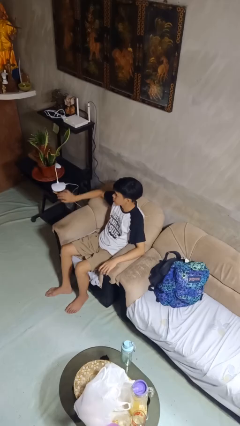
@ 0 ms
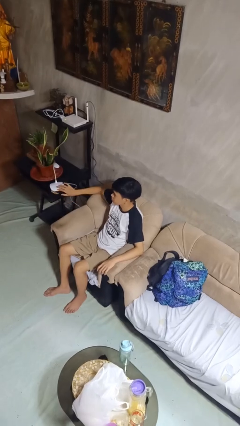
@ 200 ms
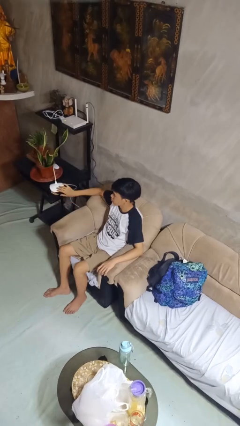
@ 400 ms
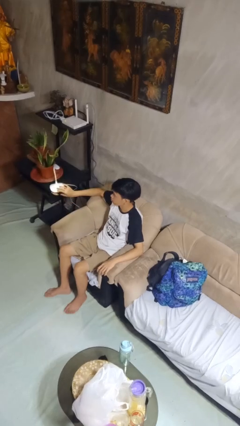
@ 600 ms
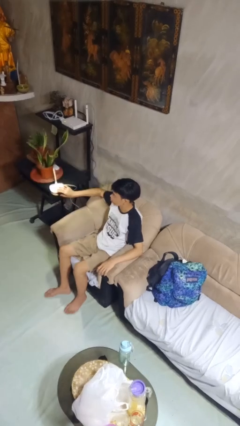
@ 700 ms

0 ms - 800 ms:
person turns on lamp

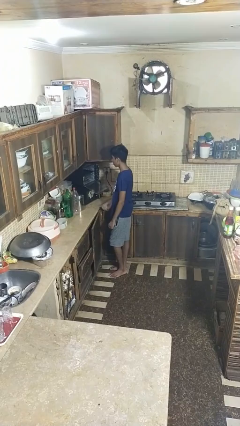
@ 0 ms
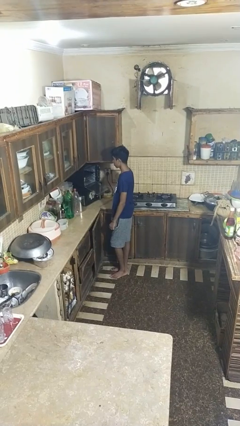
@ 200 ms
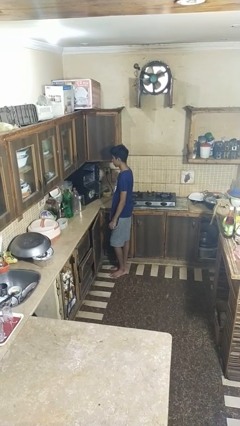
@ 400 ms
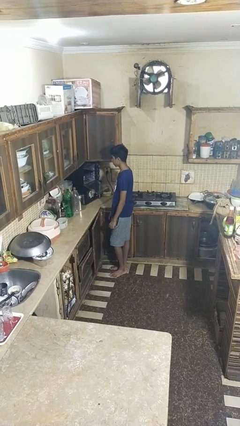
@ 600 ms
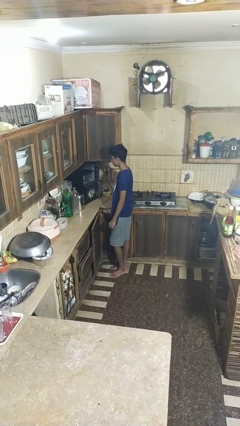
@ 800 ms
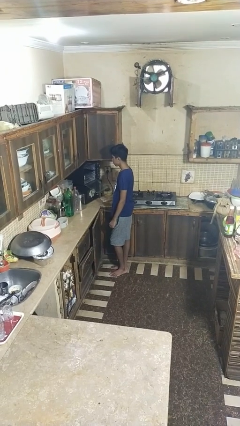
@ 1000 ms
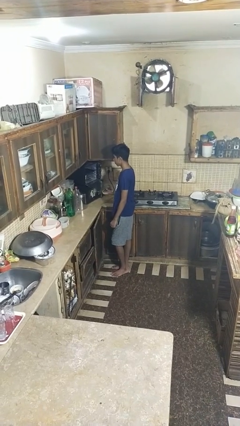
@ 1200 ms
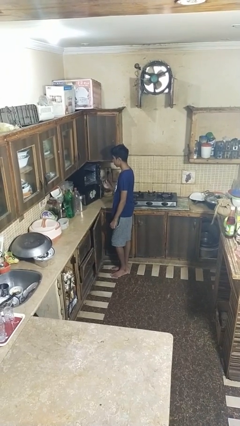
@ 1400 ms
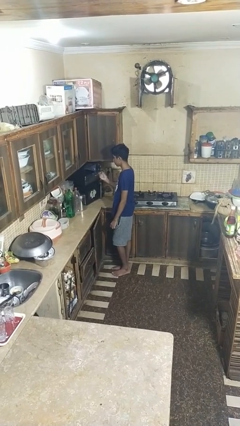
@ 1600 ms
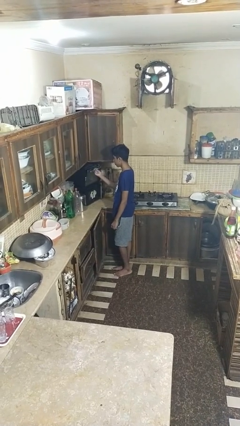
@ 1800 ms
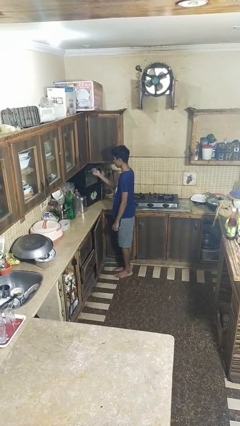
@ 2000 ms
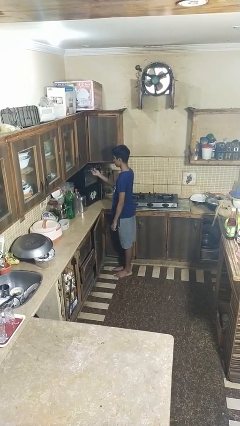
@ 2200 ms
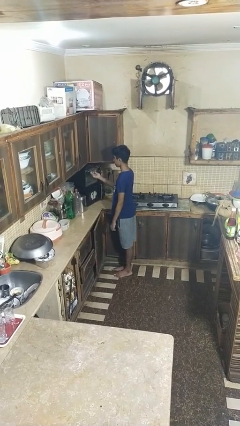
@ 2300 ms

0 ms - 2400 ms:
person closes oven door

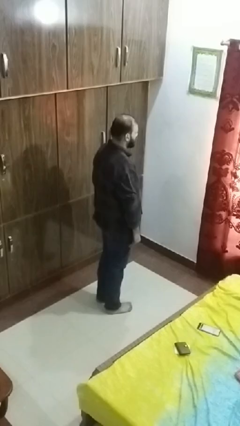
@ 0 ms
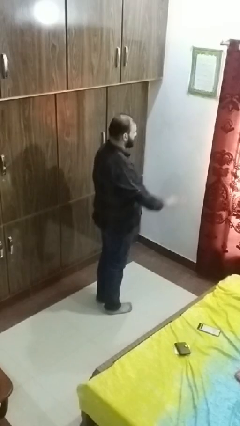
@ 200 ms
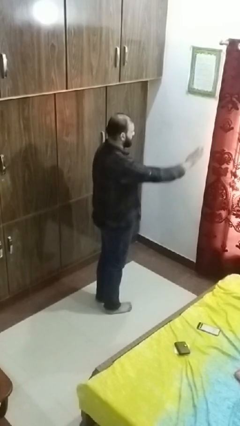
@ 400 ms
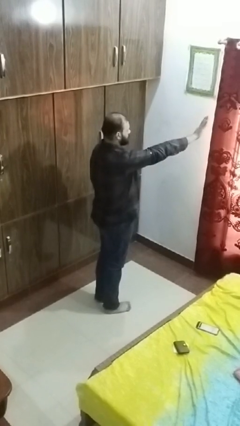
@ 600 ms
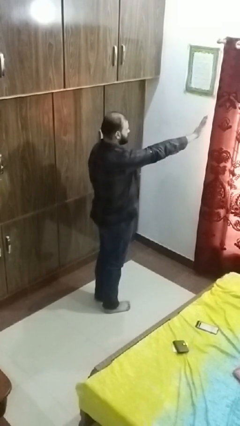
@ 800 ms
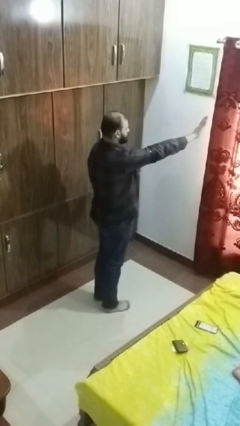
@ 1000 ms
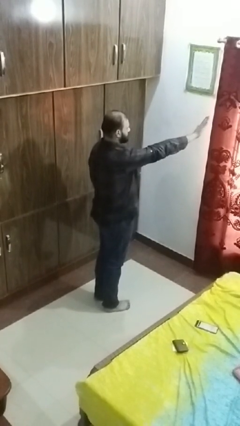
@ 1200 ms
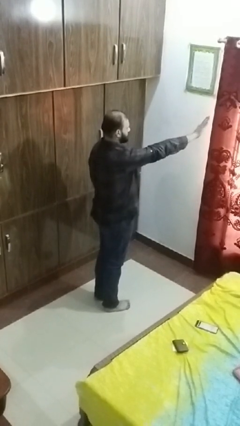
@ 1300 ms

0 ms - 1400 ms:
person gestures stop

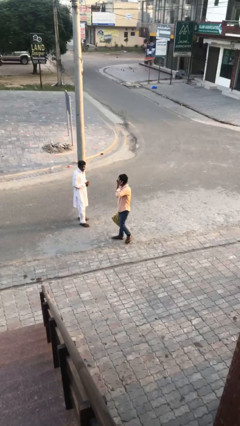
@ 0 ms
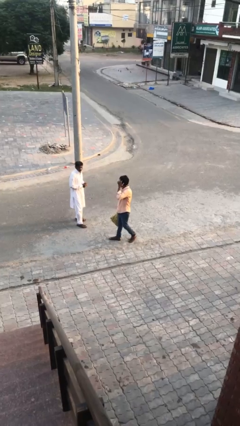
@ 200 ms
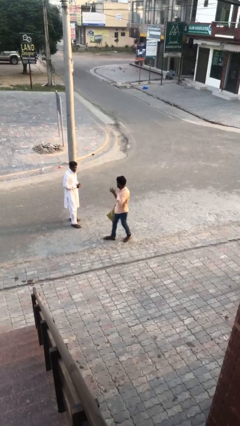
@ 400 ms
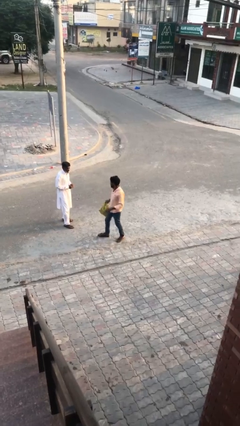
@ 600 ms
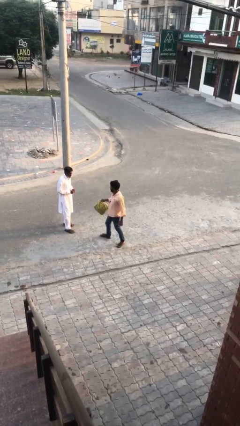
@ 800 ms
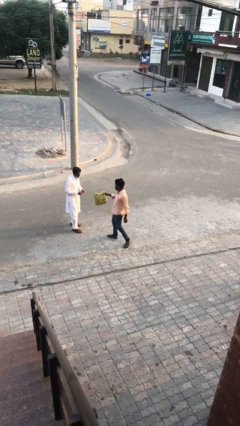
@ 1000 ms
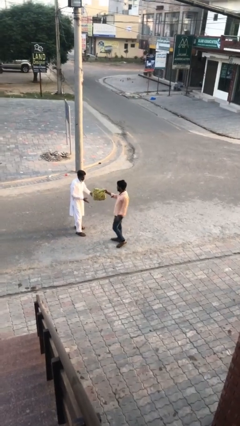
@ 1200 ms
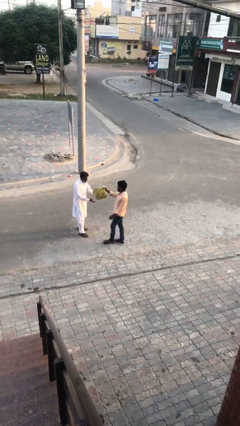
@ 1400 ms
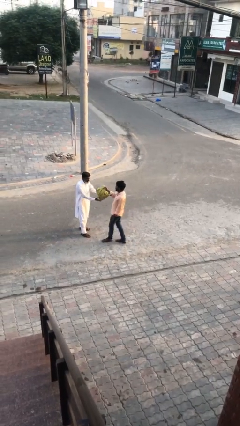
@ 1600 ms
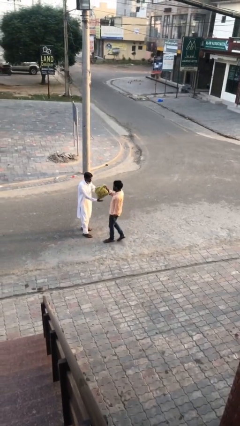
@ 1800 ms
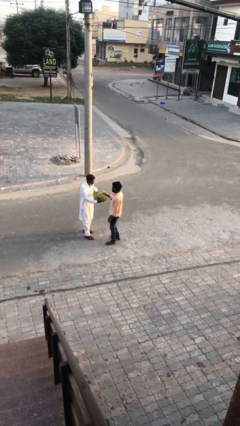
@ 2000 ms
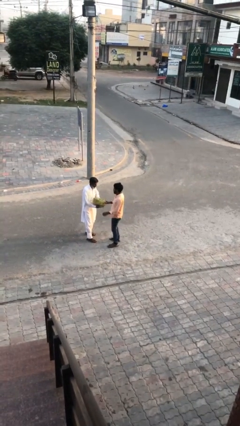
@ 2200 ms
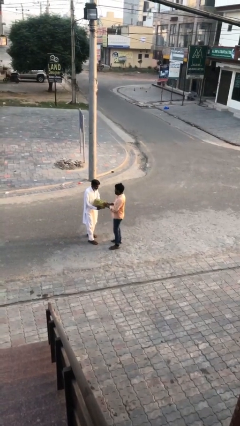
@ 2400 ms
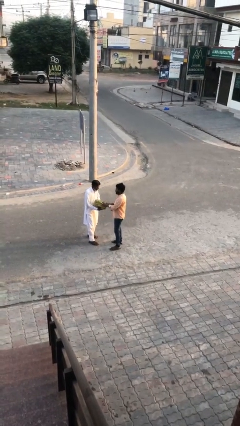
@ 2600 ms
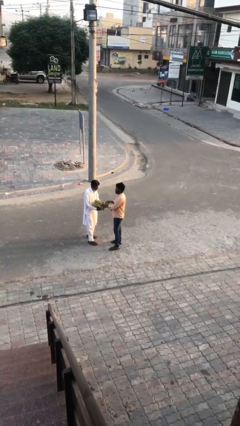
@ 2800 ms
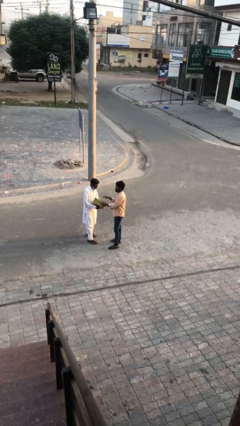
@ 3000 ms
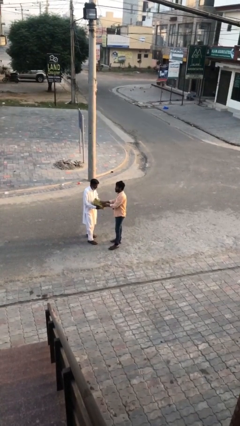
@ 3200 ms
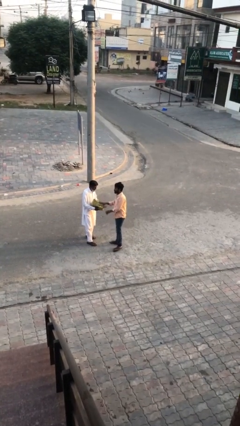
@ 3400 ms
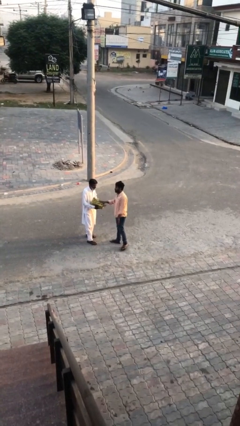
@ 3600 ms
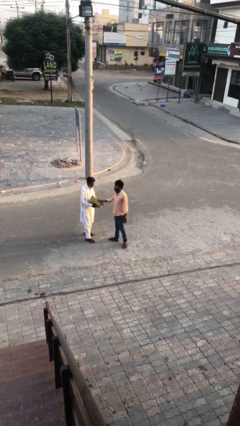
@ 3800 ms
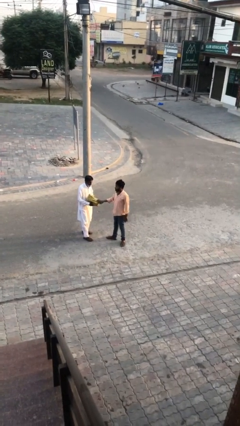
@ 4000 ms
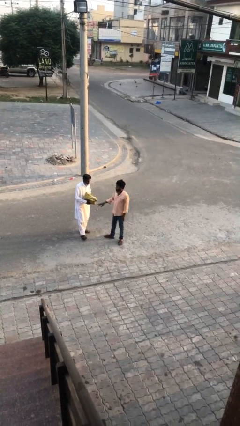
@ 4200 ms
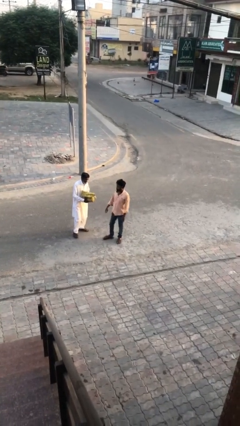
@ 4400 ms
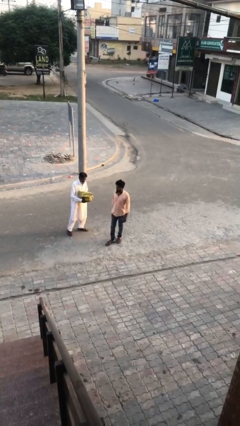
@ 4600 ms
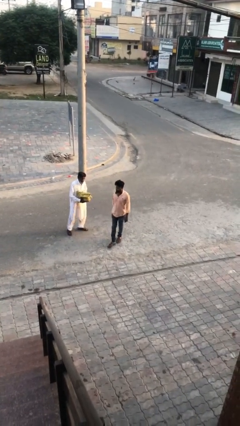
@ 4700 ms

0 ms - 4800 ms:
person transfers object to person

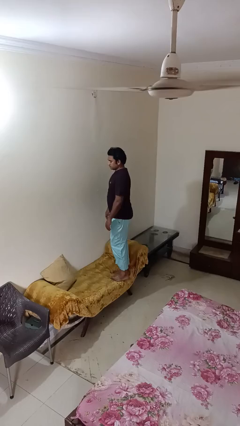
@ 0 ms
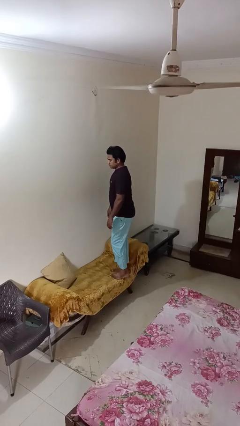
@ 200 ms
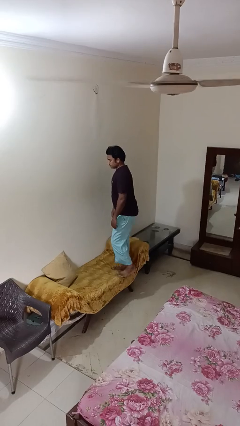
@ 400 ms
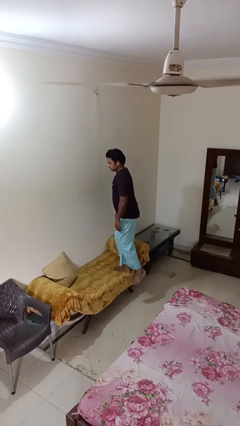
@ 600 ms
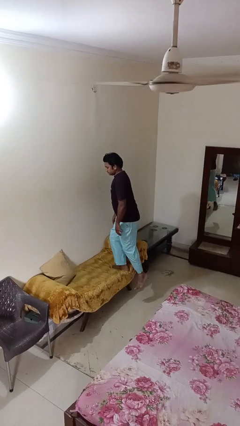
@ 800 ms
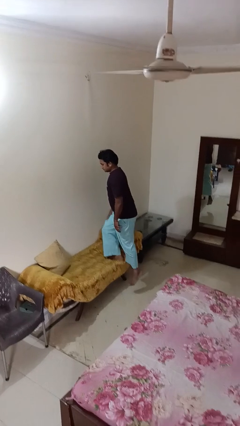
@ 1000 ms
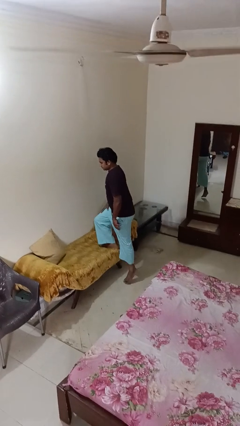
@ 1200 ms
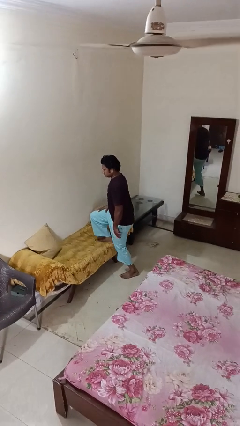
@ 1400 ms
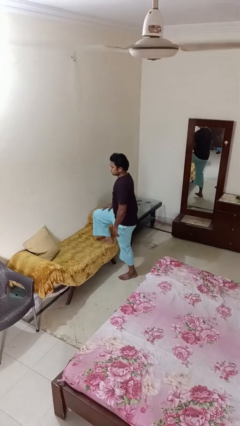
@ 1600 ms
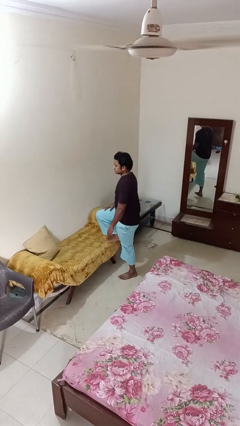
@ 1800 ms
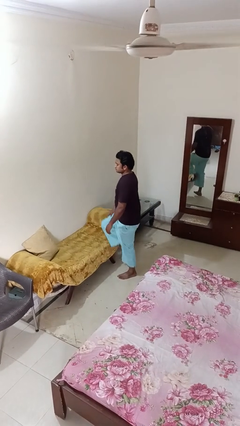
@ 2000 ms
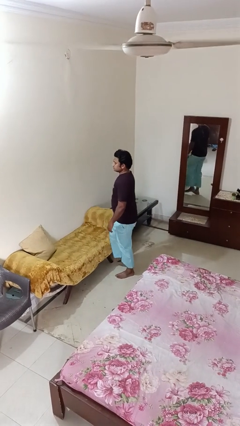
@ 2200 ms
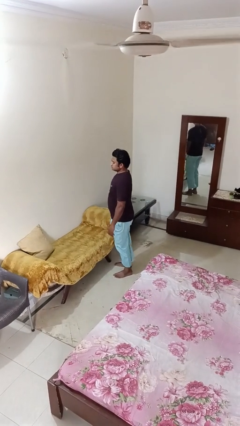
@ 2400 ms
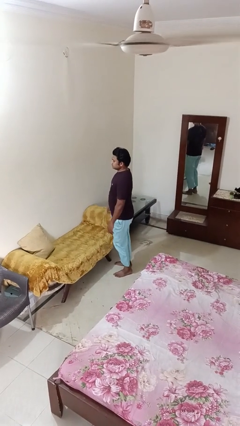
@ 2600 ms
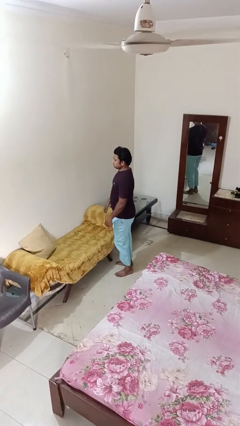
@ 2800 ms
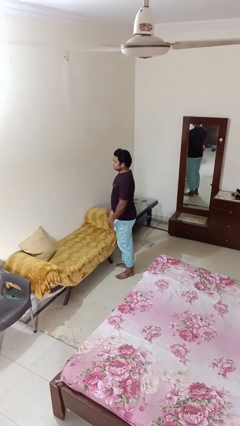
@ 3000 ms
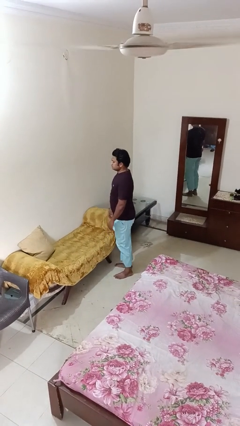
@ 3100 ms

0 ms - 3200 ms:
person climbs off couch

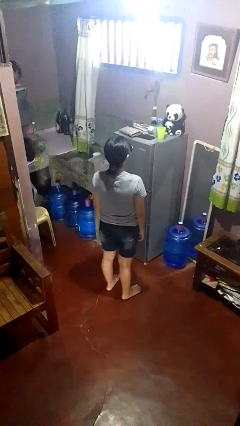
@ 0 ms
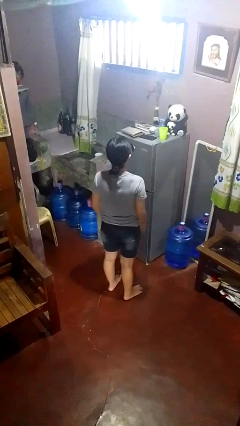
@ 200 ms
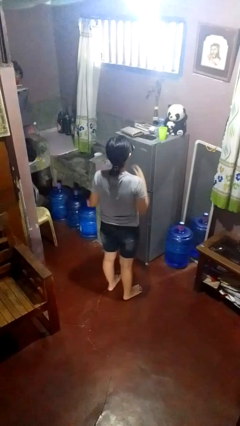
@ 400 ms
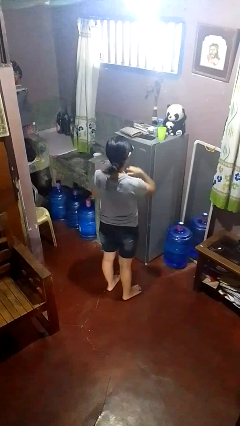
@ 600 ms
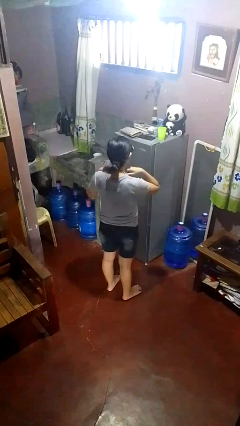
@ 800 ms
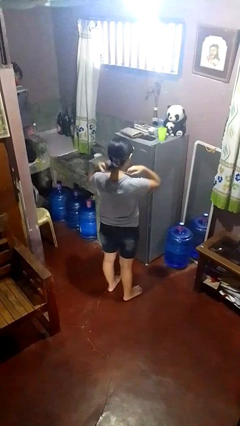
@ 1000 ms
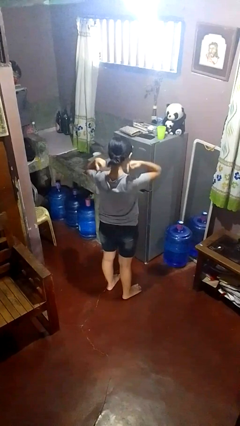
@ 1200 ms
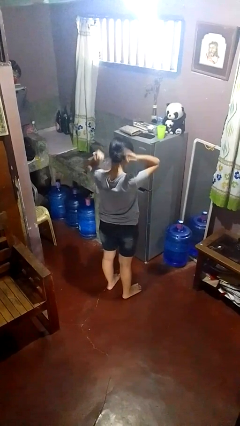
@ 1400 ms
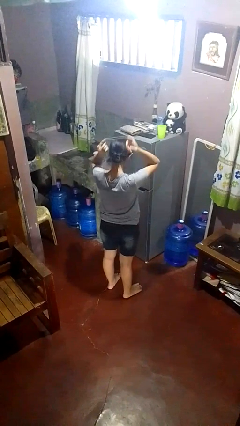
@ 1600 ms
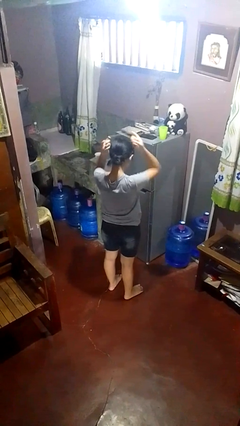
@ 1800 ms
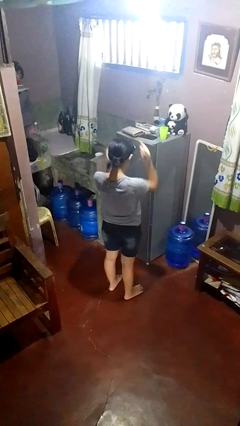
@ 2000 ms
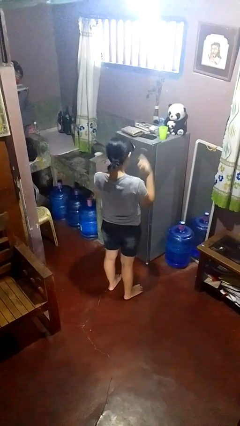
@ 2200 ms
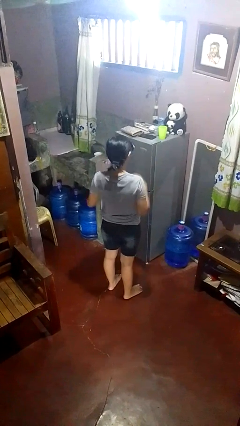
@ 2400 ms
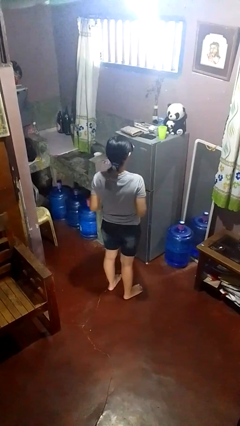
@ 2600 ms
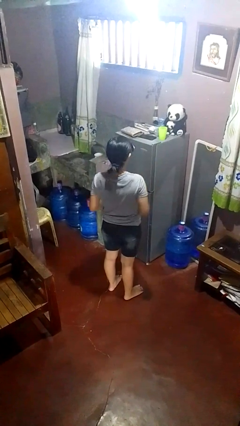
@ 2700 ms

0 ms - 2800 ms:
person takes off necklace

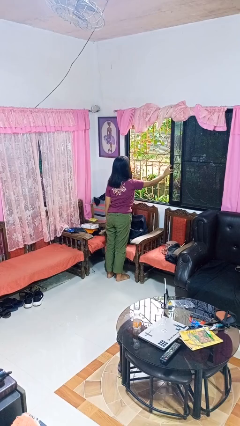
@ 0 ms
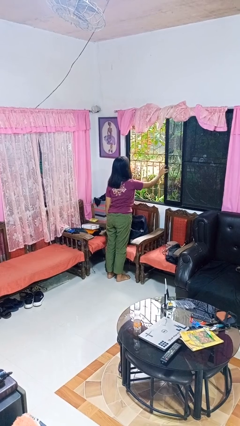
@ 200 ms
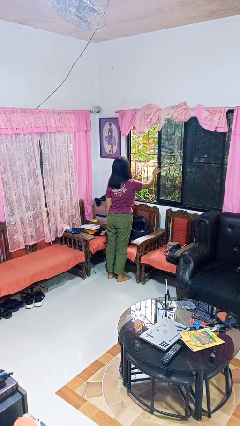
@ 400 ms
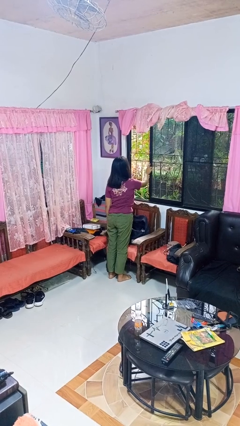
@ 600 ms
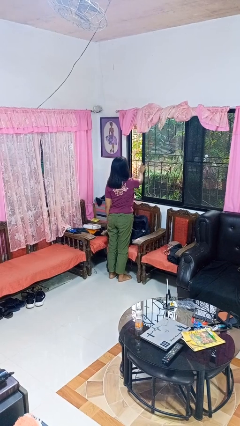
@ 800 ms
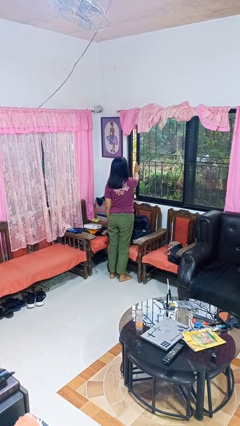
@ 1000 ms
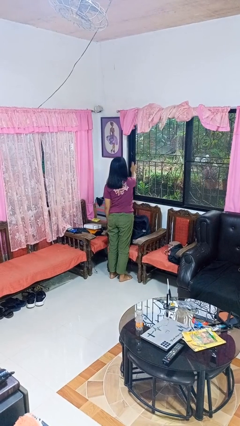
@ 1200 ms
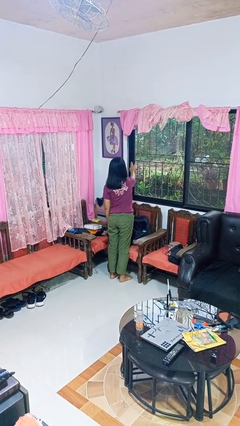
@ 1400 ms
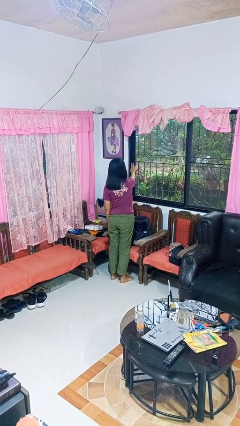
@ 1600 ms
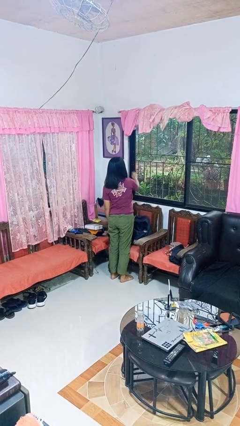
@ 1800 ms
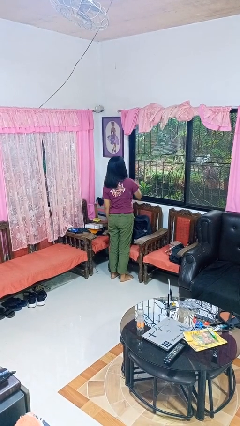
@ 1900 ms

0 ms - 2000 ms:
person closes home window
